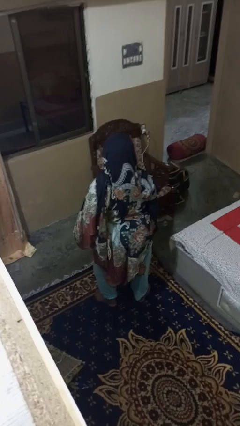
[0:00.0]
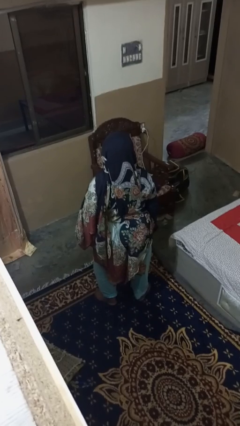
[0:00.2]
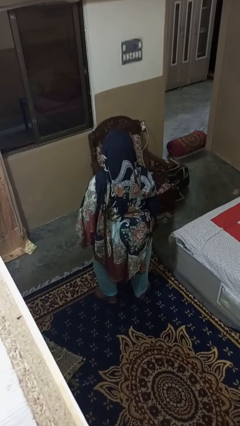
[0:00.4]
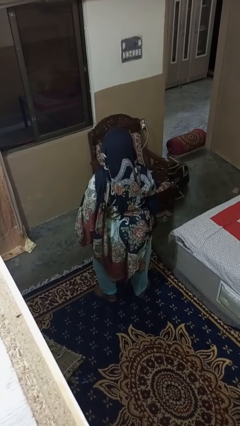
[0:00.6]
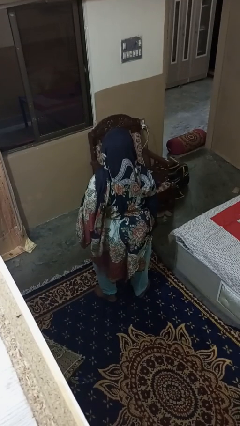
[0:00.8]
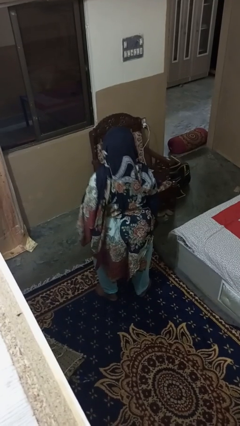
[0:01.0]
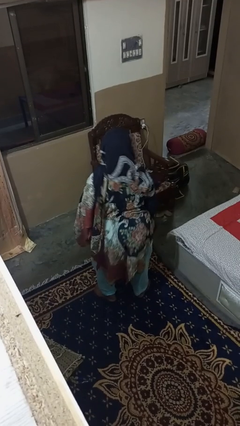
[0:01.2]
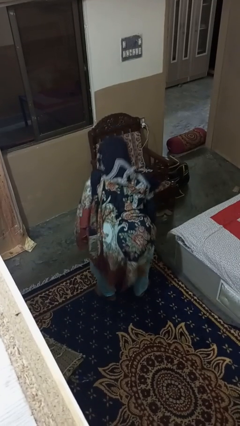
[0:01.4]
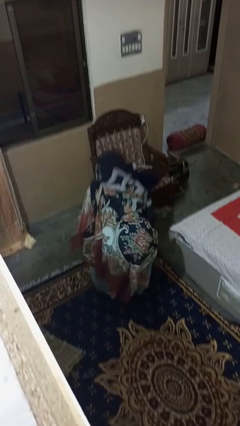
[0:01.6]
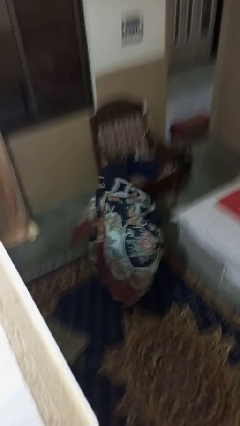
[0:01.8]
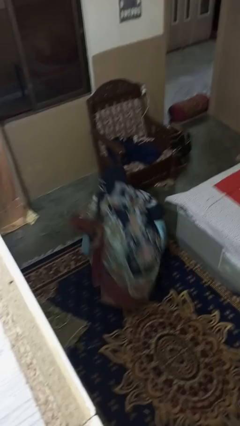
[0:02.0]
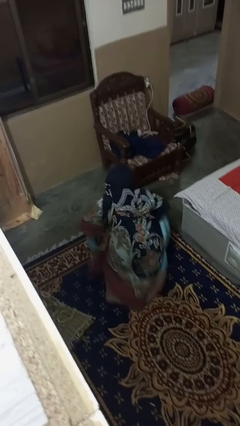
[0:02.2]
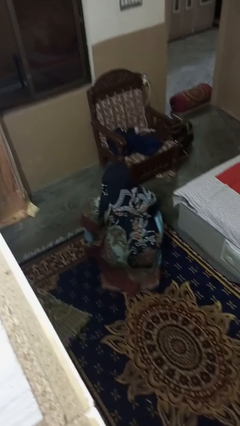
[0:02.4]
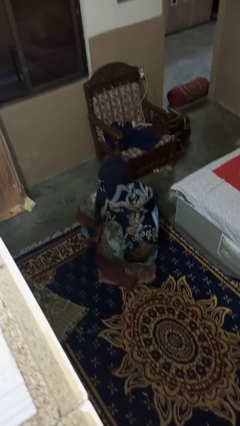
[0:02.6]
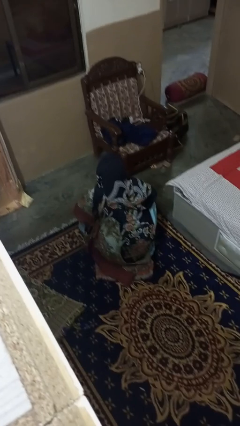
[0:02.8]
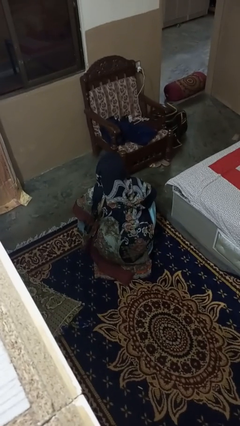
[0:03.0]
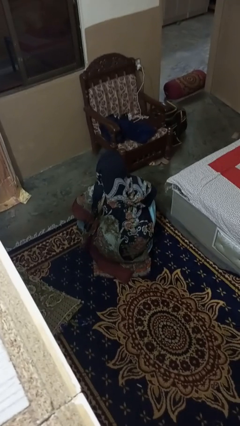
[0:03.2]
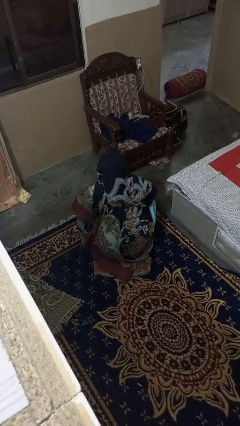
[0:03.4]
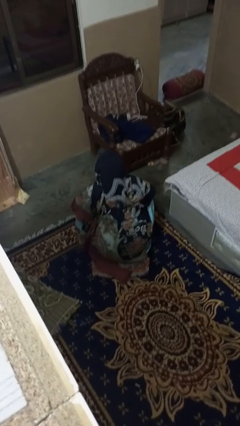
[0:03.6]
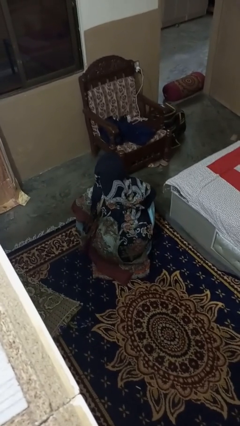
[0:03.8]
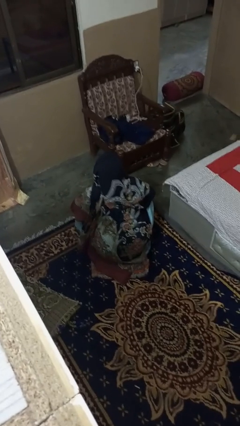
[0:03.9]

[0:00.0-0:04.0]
person squats

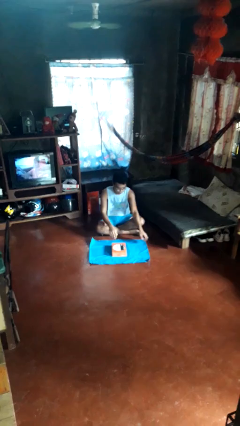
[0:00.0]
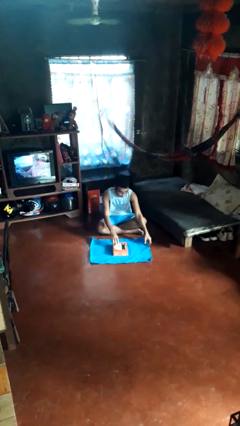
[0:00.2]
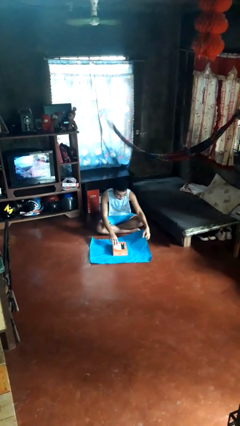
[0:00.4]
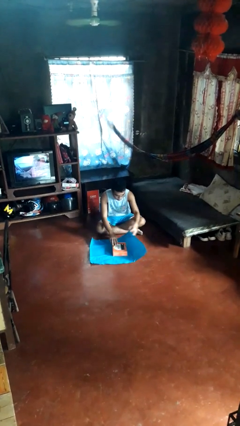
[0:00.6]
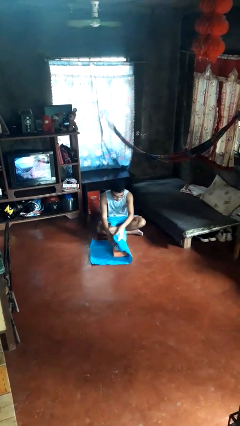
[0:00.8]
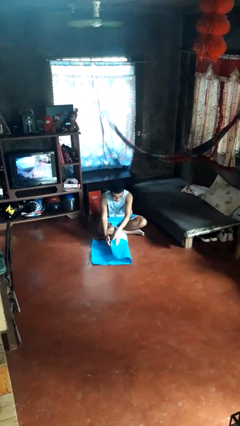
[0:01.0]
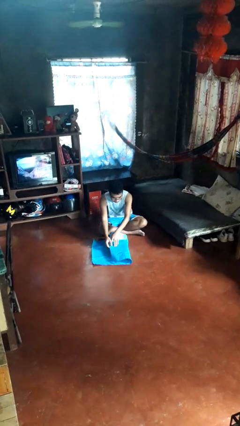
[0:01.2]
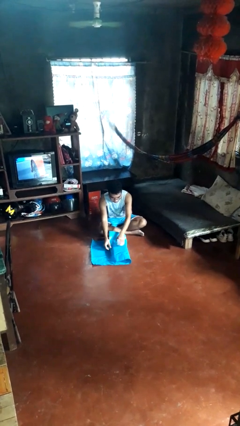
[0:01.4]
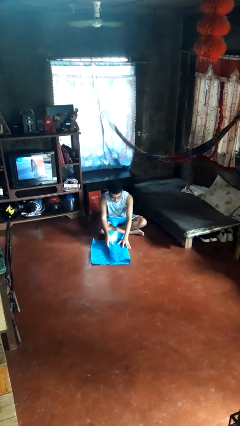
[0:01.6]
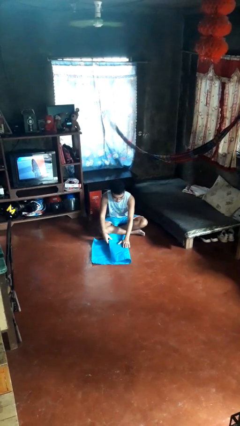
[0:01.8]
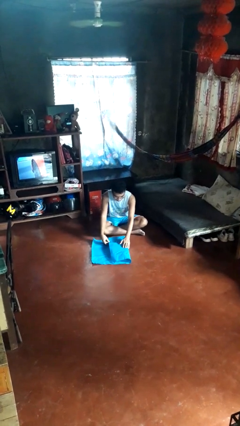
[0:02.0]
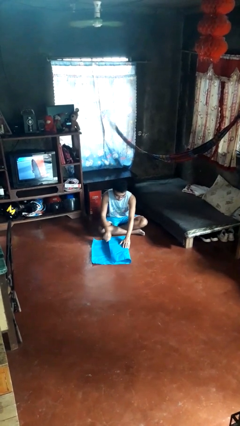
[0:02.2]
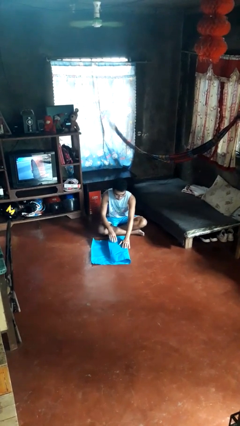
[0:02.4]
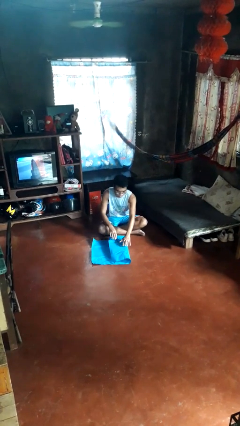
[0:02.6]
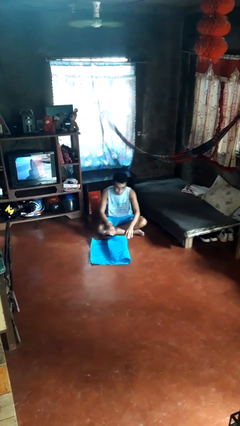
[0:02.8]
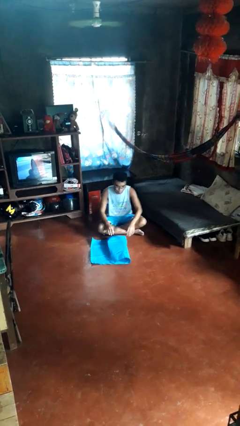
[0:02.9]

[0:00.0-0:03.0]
person wraps box

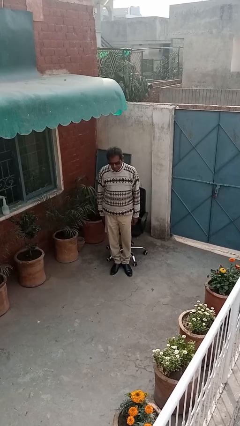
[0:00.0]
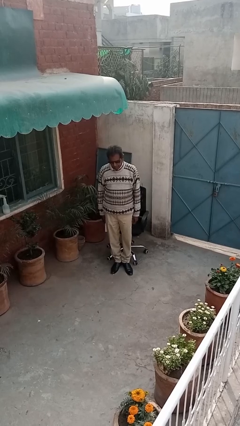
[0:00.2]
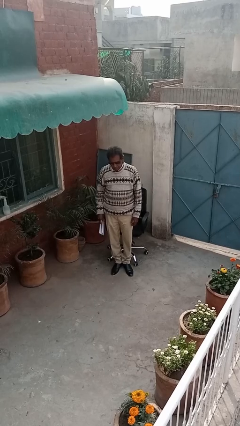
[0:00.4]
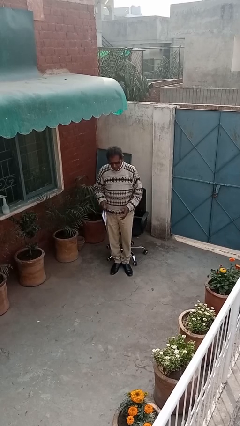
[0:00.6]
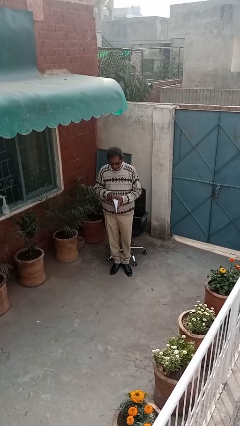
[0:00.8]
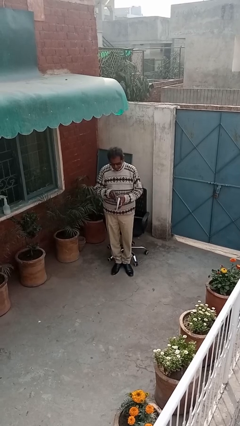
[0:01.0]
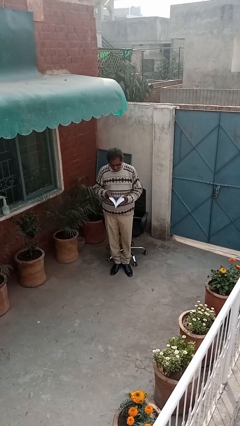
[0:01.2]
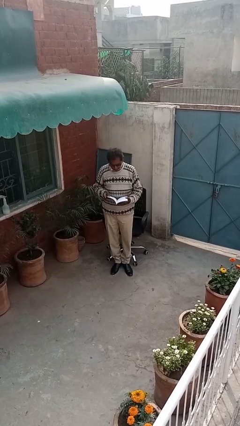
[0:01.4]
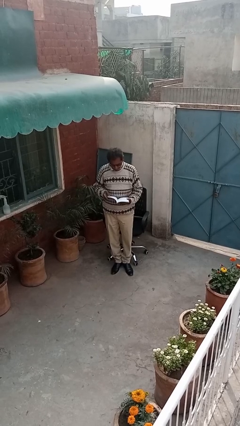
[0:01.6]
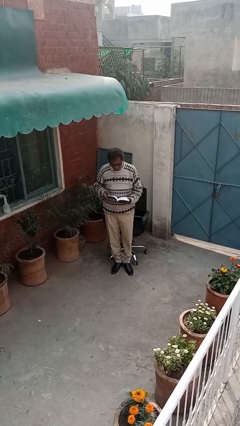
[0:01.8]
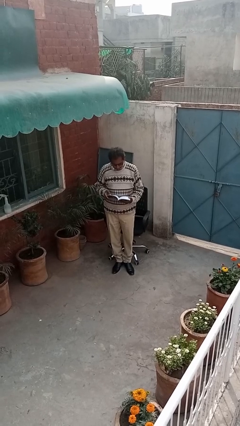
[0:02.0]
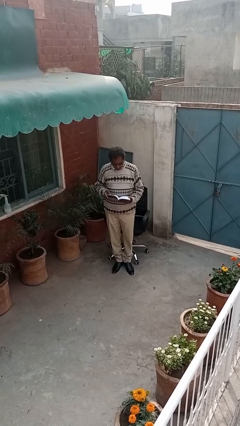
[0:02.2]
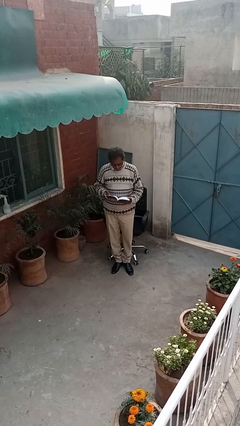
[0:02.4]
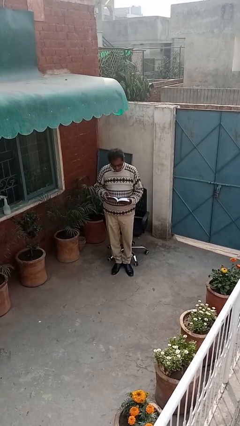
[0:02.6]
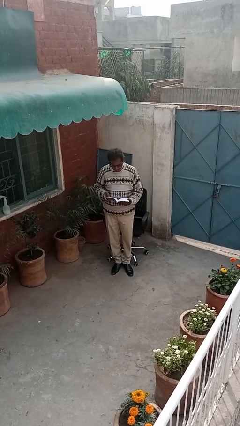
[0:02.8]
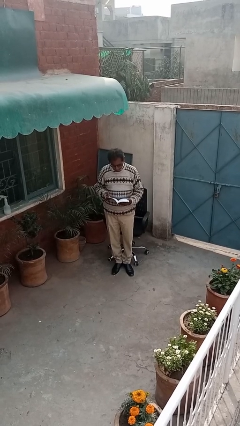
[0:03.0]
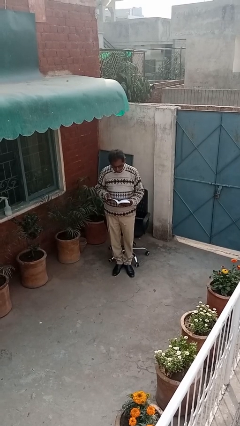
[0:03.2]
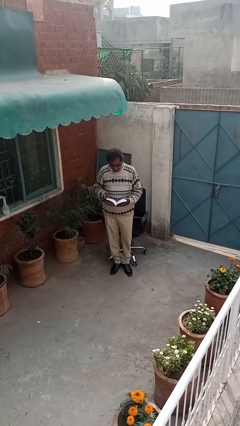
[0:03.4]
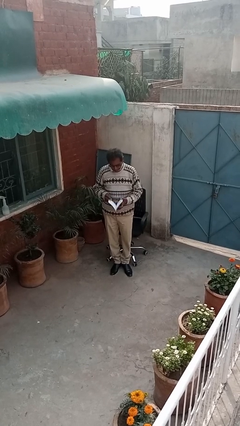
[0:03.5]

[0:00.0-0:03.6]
person reads document

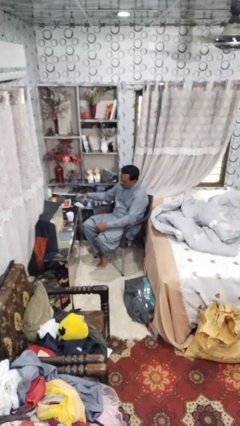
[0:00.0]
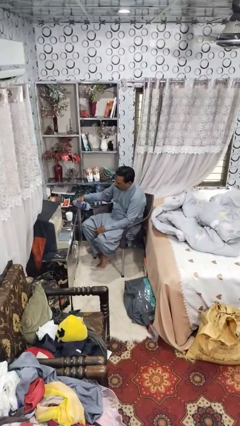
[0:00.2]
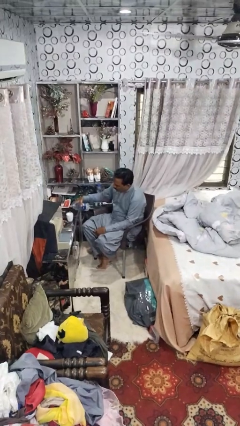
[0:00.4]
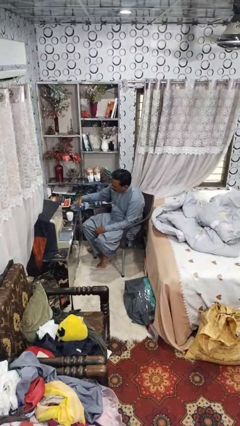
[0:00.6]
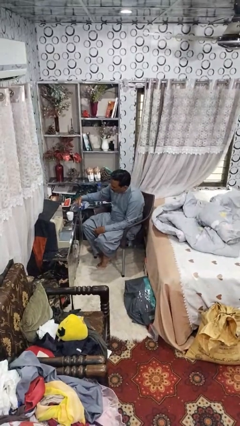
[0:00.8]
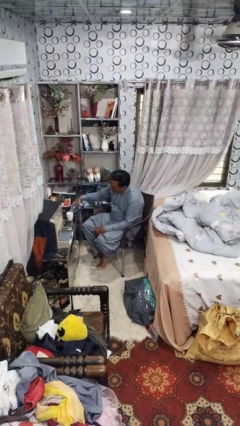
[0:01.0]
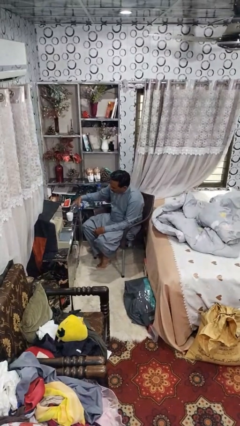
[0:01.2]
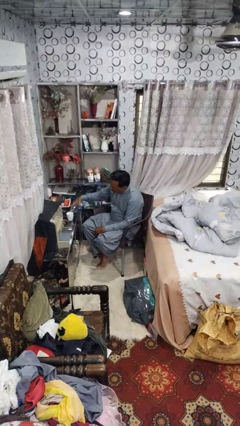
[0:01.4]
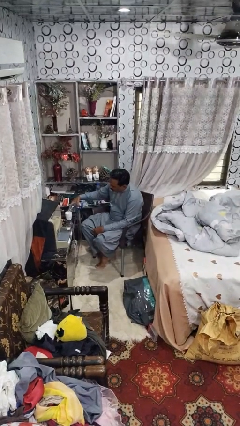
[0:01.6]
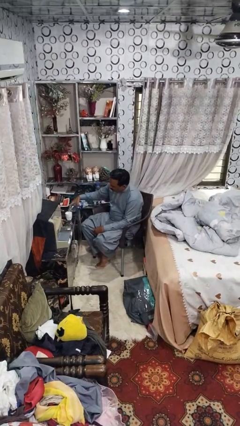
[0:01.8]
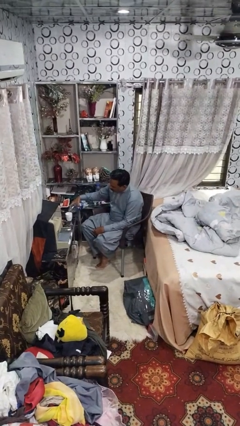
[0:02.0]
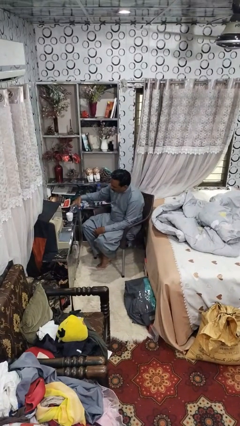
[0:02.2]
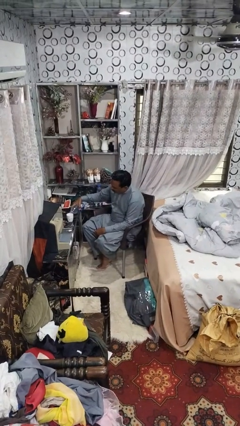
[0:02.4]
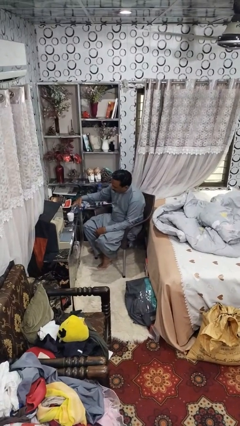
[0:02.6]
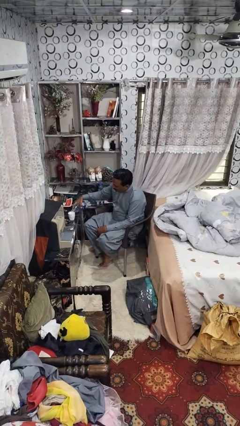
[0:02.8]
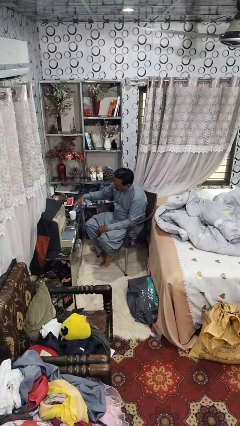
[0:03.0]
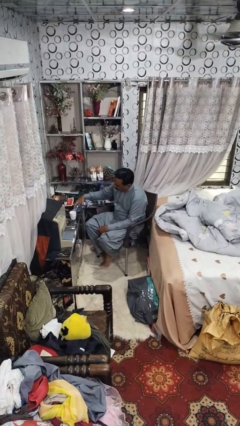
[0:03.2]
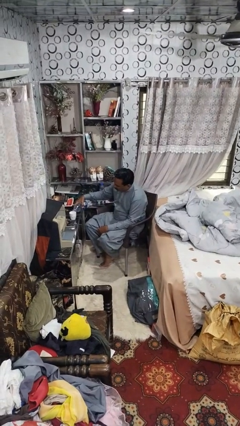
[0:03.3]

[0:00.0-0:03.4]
person pours liquid into cup

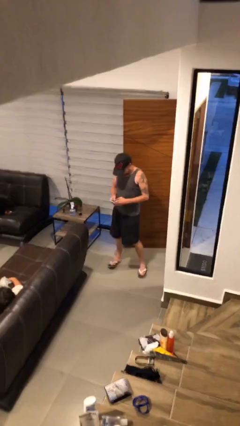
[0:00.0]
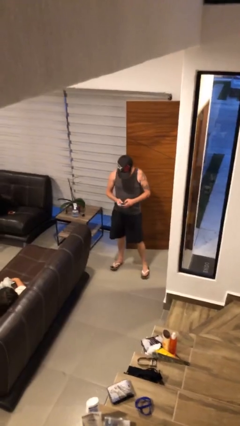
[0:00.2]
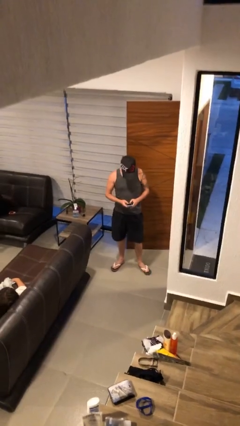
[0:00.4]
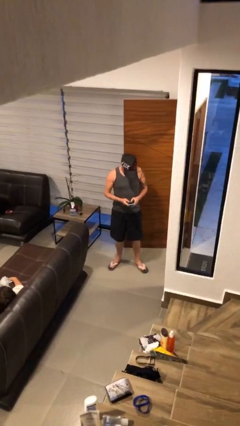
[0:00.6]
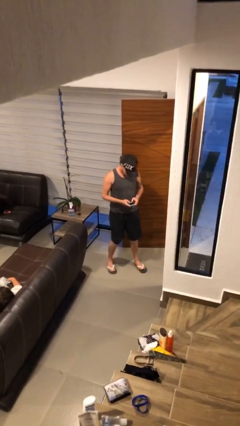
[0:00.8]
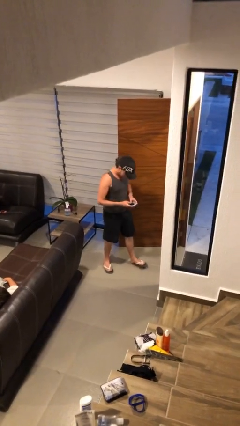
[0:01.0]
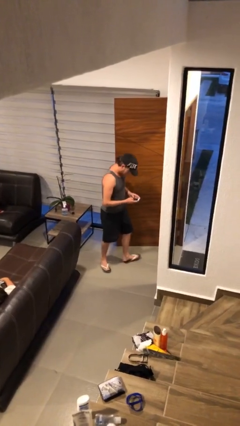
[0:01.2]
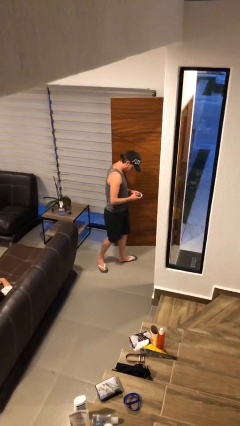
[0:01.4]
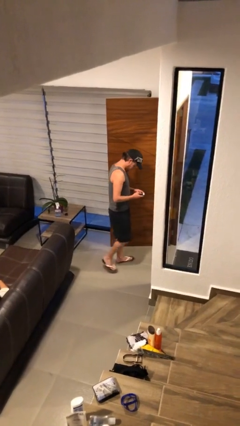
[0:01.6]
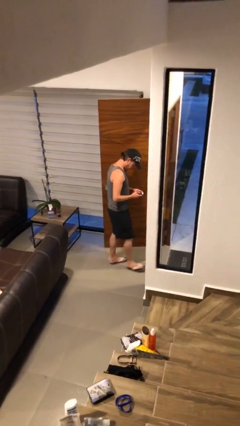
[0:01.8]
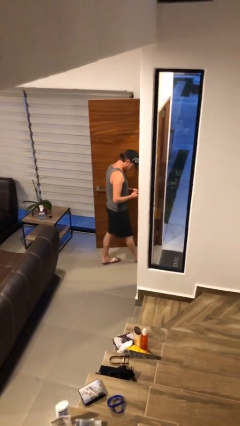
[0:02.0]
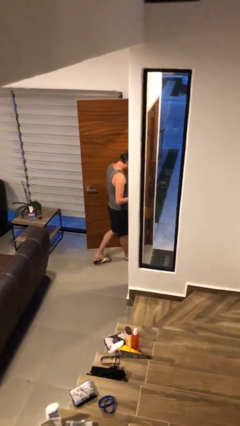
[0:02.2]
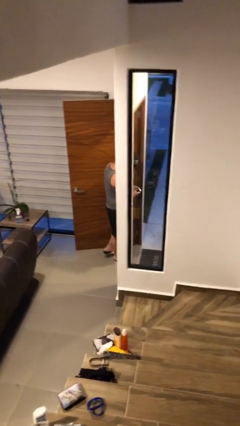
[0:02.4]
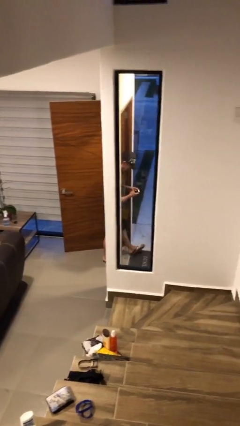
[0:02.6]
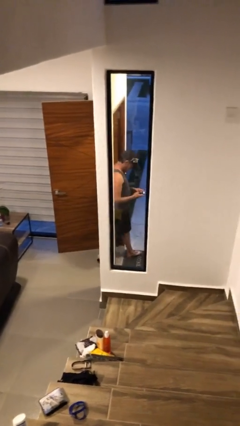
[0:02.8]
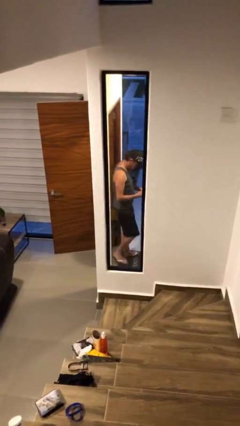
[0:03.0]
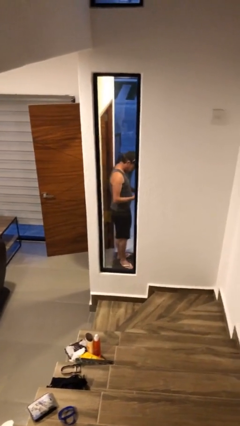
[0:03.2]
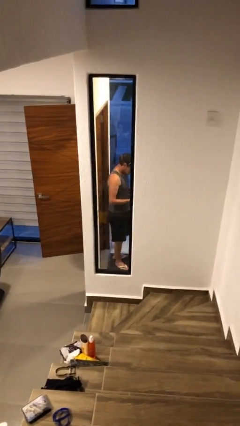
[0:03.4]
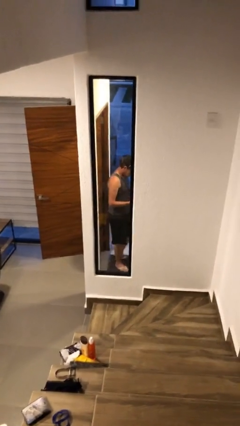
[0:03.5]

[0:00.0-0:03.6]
person exits scene through structure
